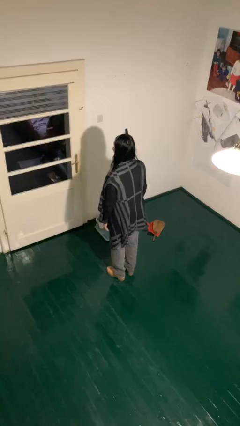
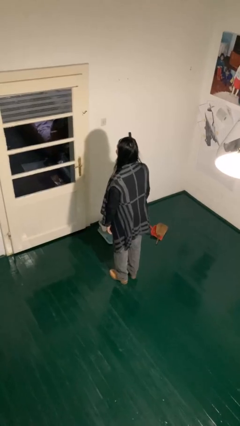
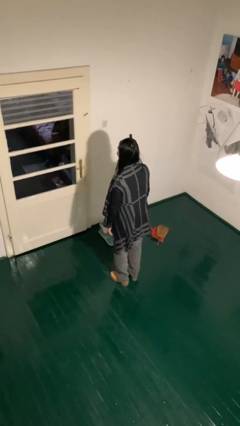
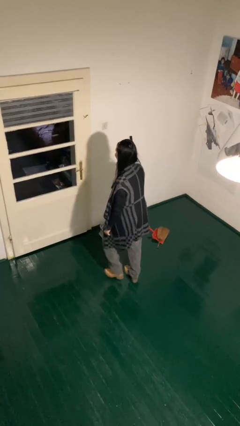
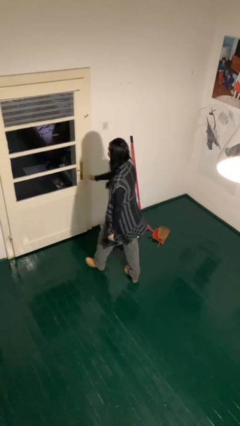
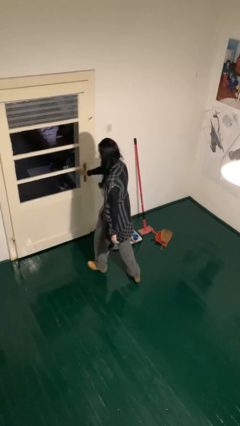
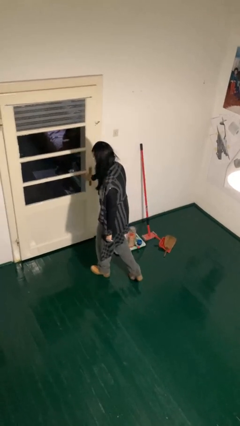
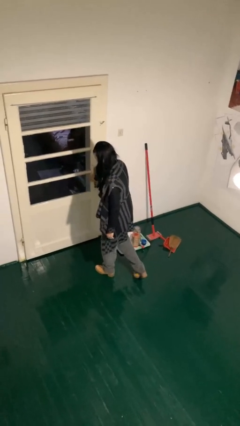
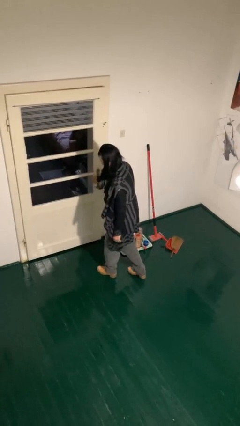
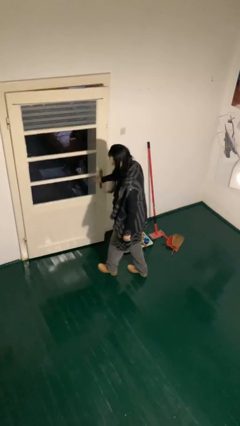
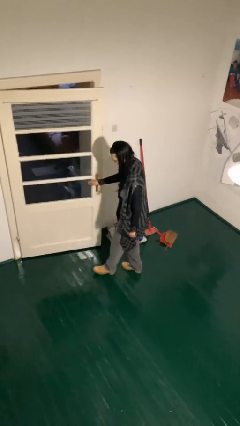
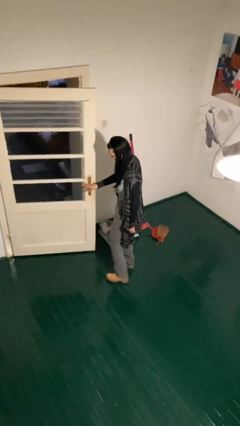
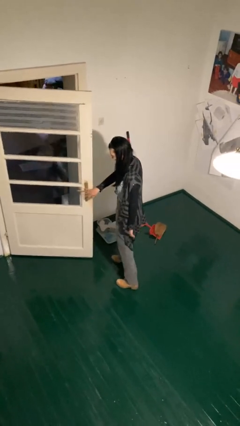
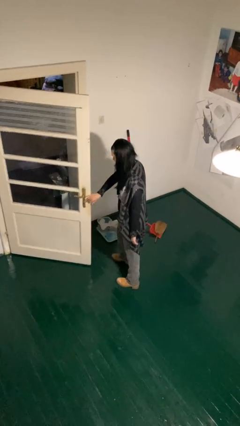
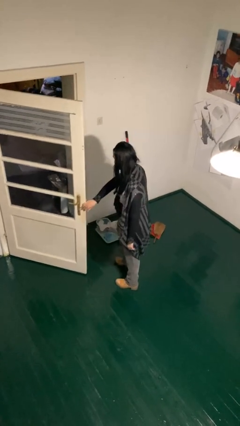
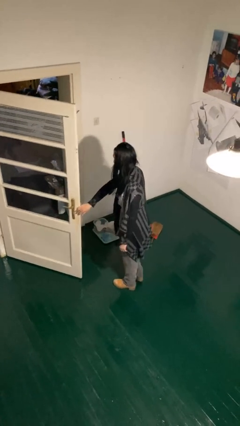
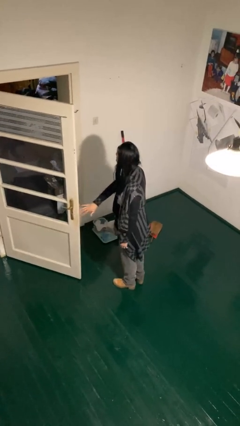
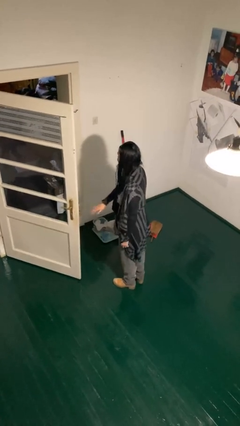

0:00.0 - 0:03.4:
person opens facility door

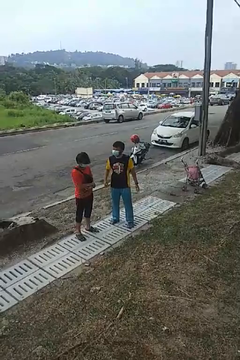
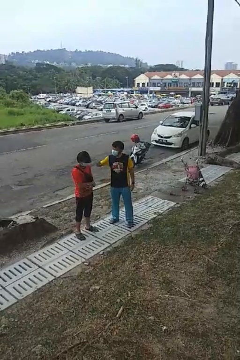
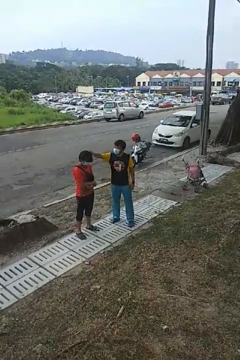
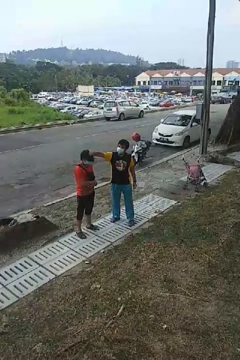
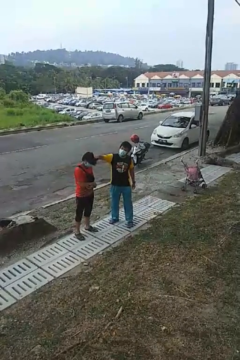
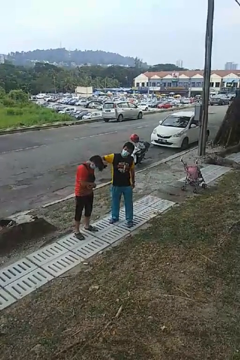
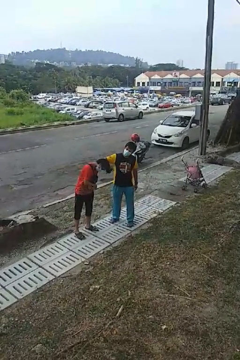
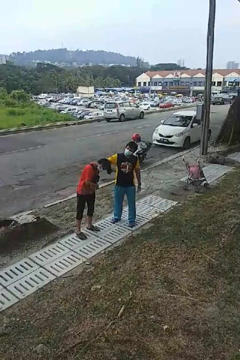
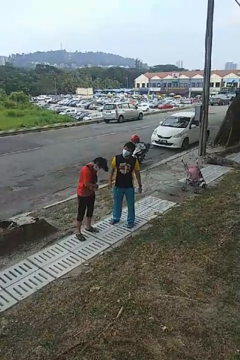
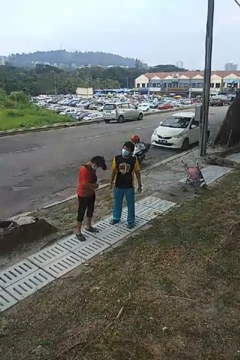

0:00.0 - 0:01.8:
person grabs person by hair

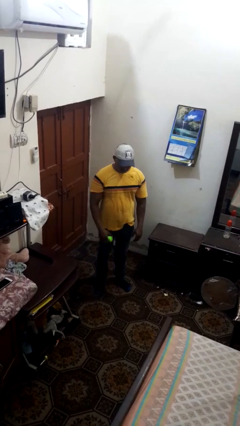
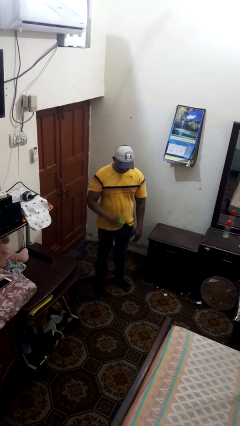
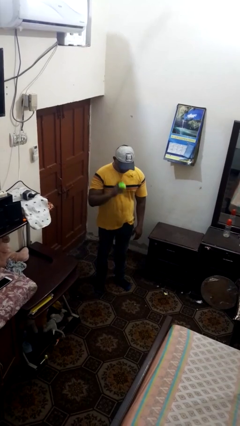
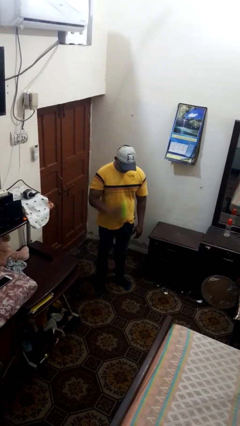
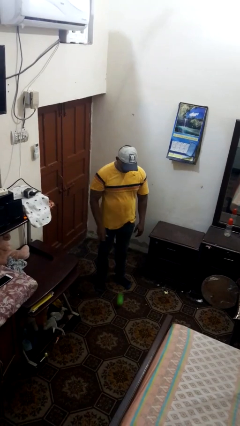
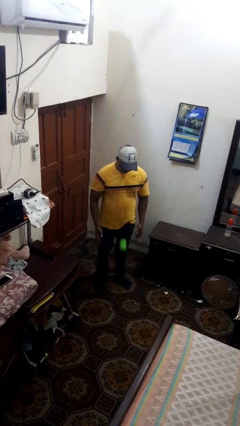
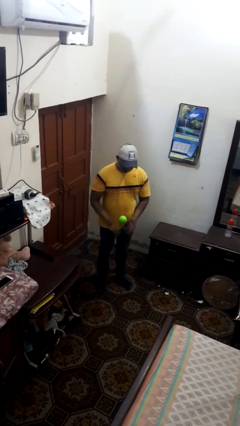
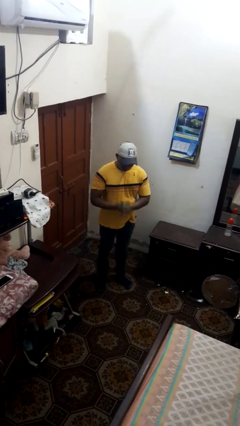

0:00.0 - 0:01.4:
person bounces ball on floor

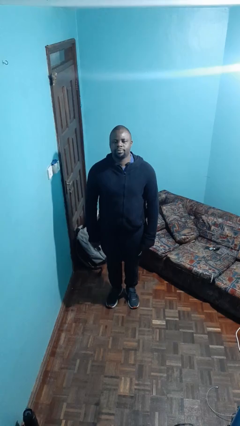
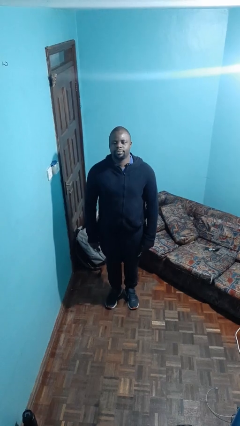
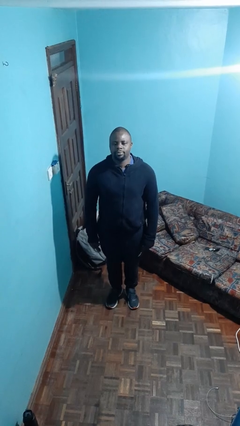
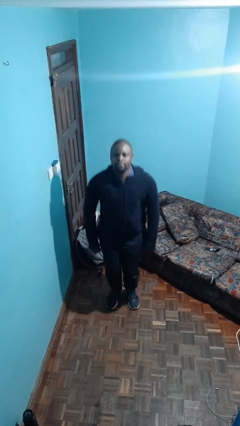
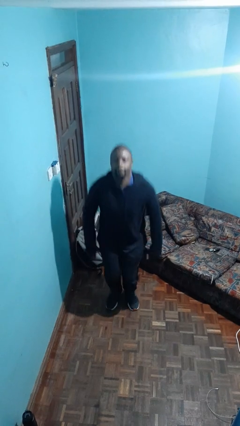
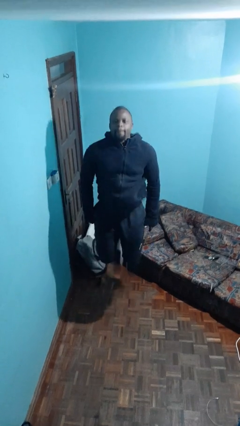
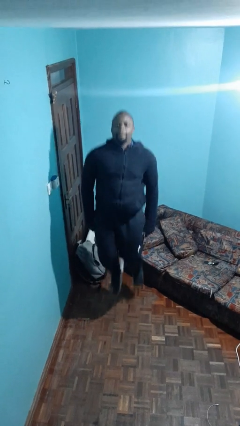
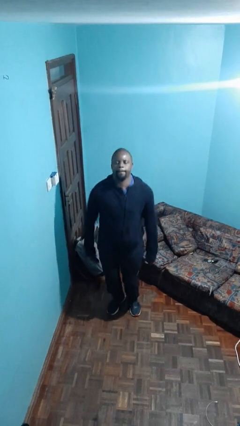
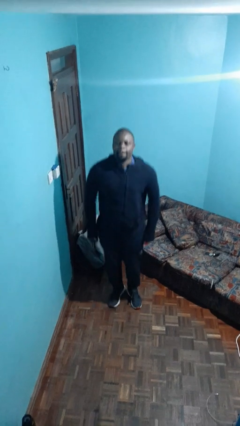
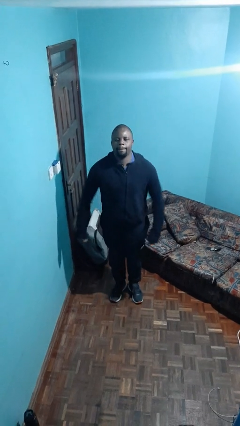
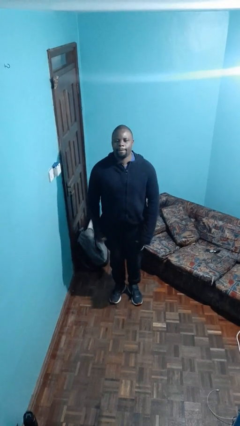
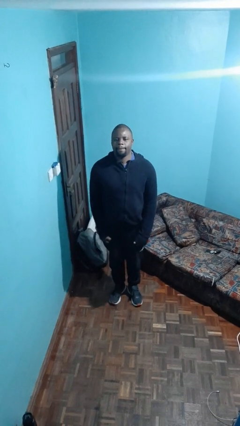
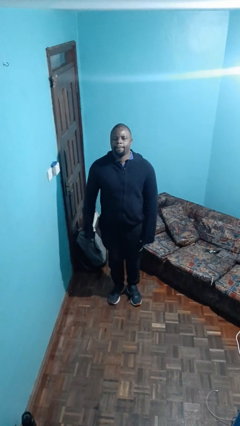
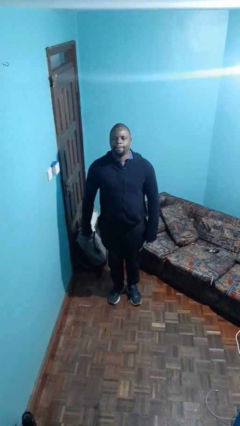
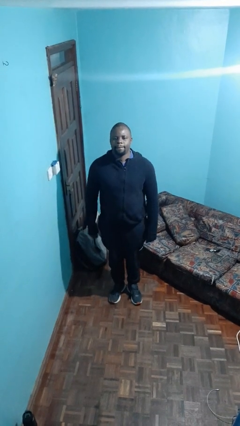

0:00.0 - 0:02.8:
person jumps

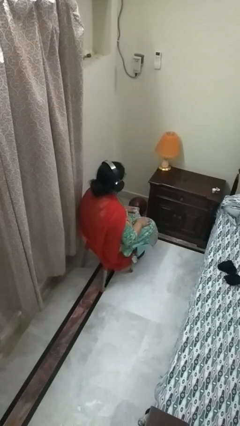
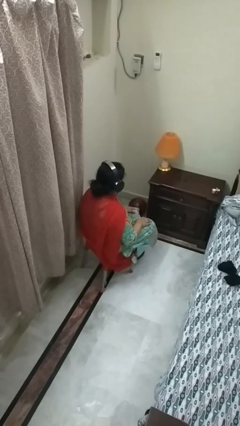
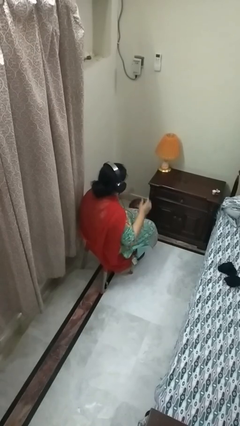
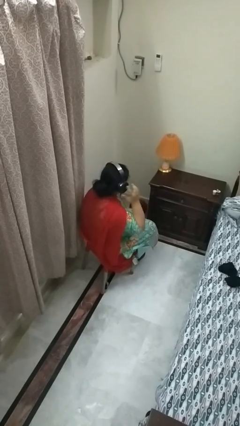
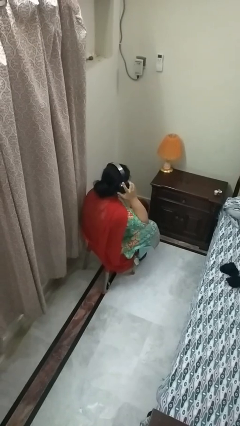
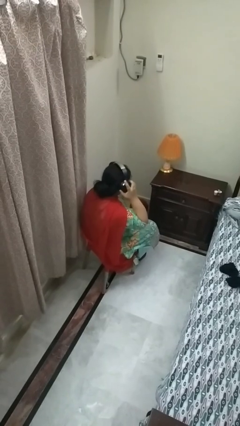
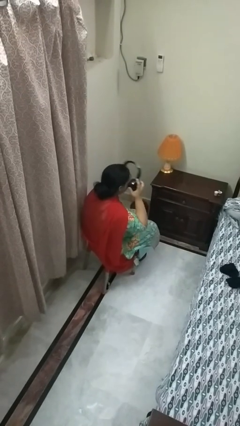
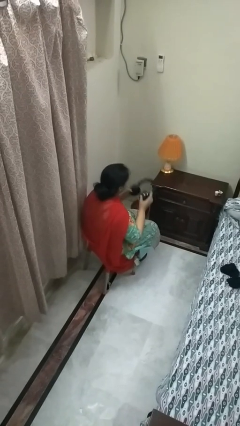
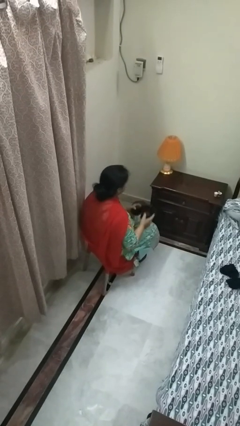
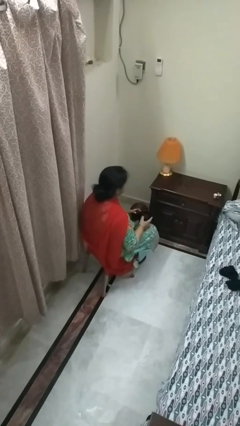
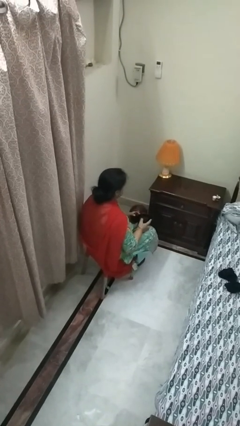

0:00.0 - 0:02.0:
person takes off headphones

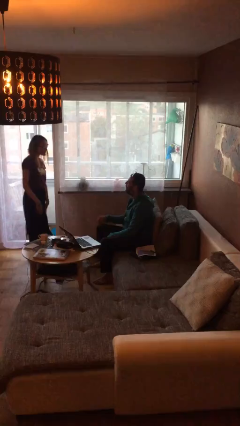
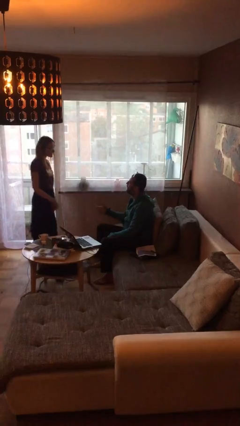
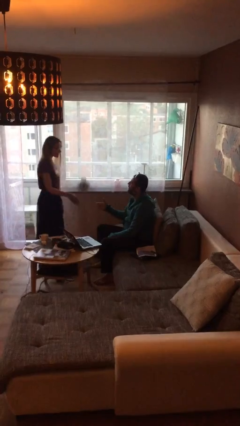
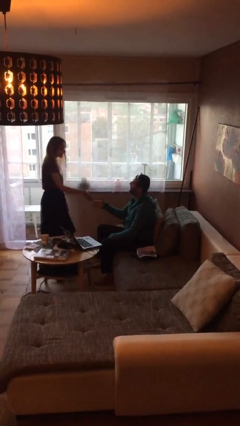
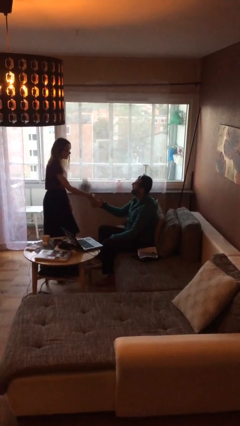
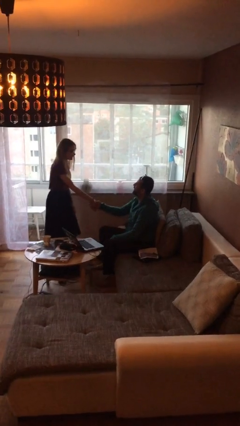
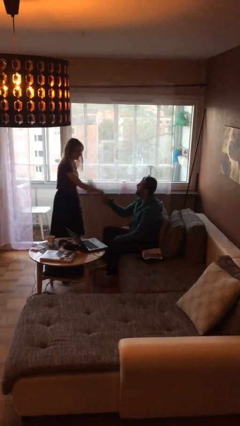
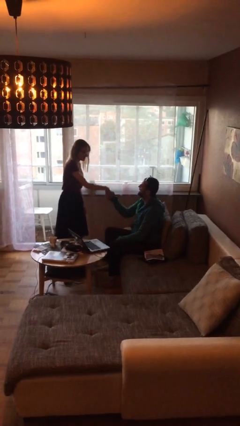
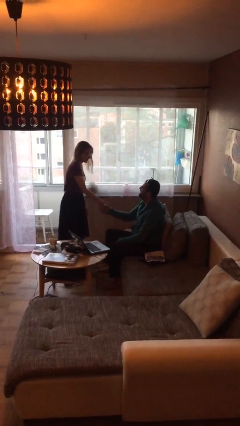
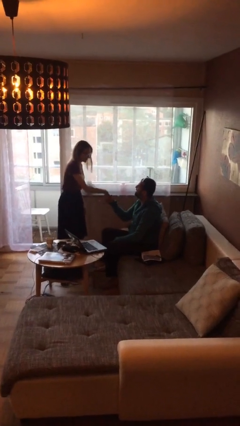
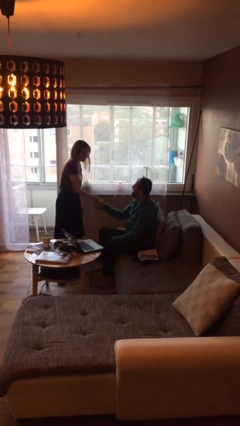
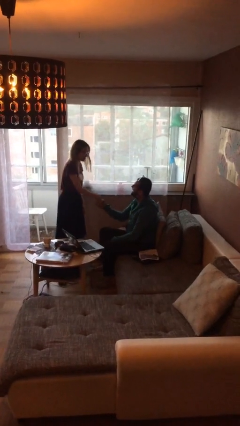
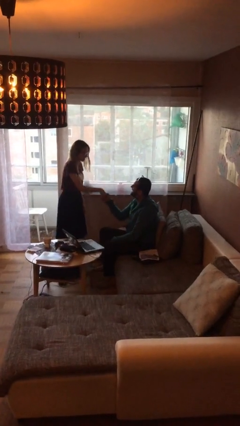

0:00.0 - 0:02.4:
person shakes hand

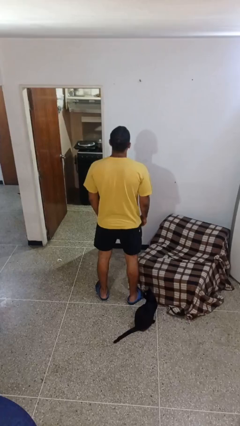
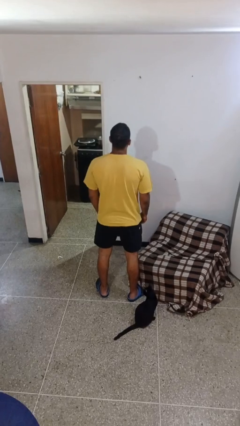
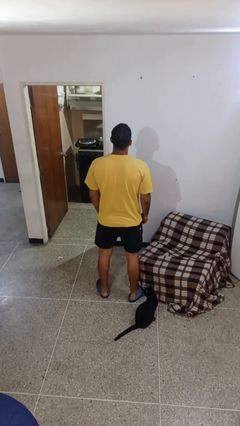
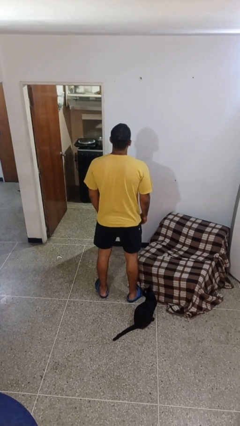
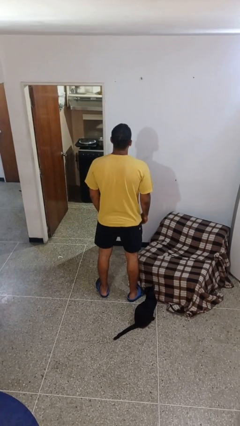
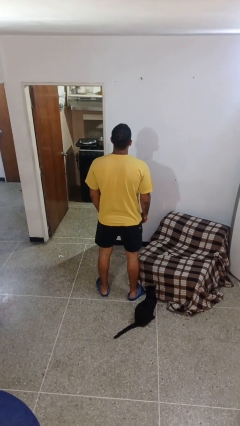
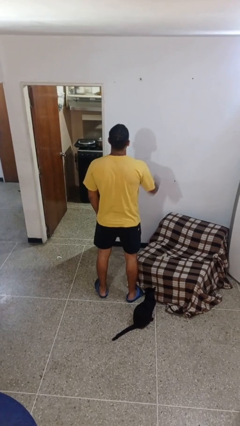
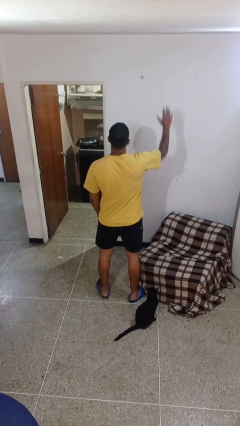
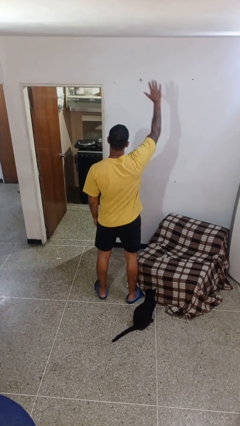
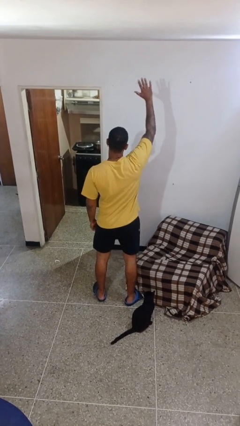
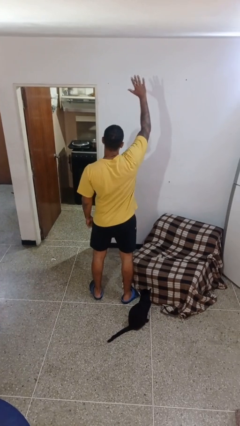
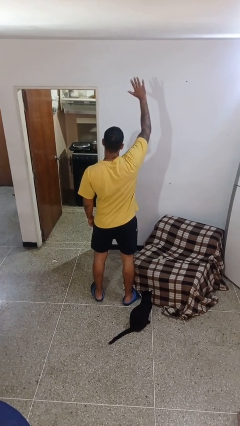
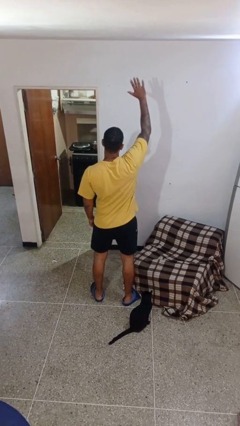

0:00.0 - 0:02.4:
person gestures raise hand

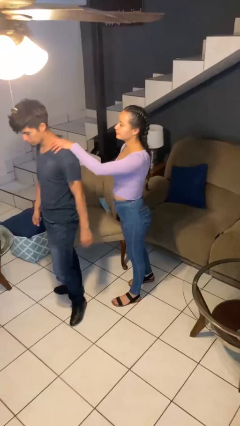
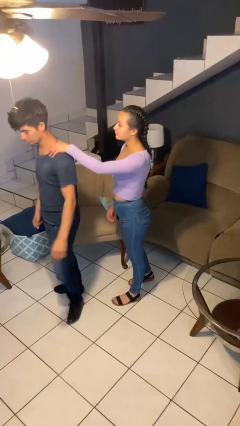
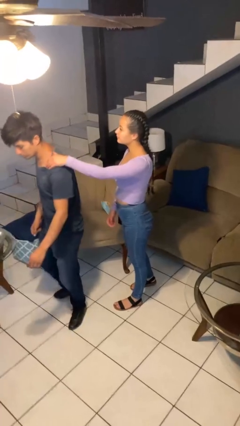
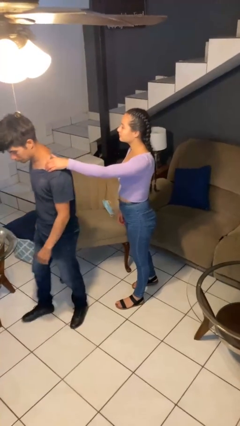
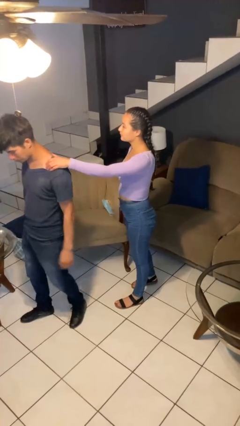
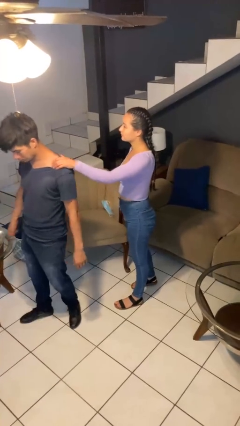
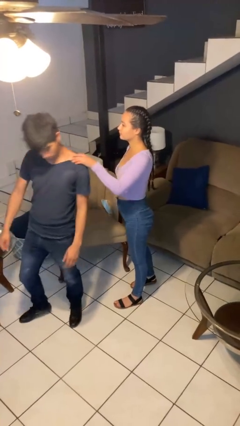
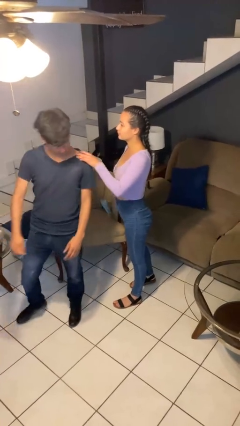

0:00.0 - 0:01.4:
person grabs person by shoulder
